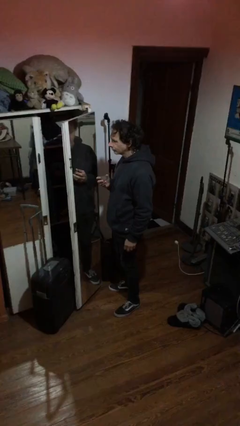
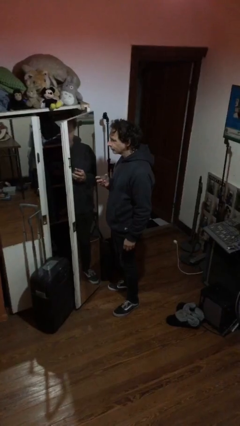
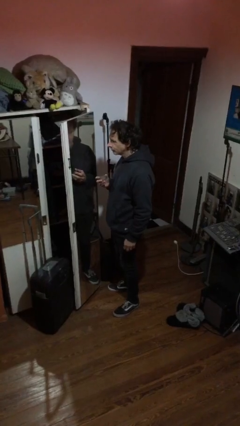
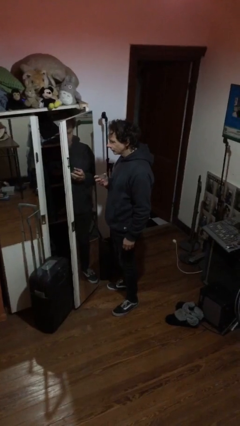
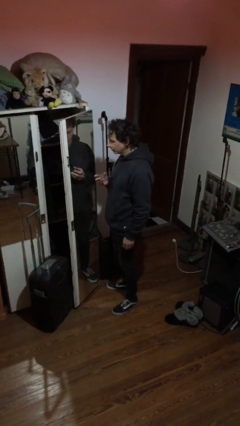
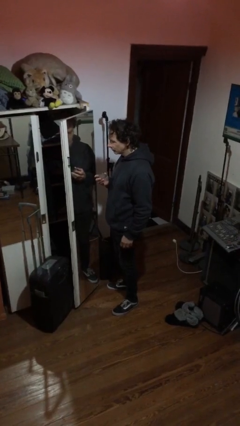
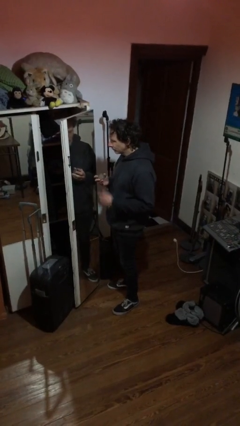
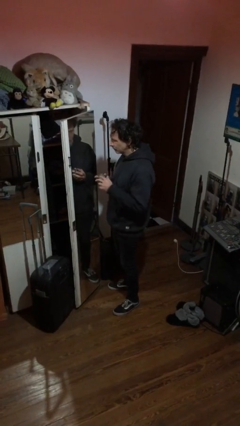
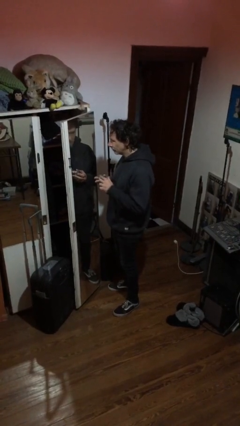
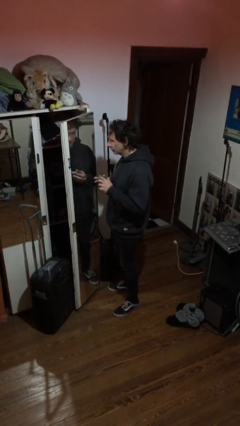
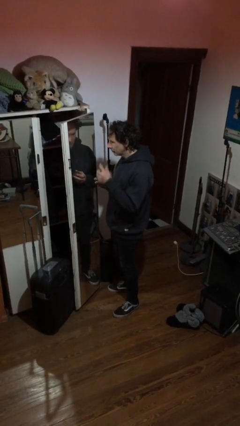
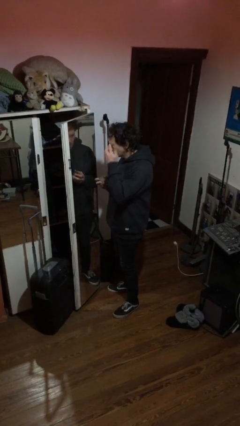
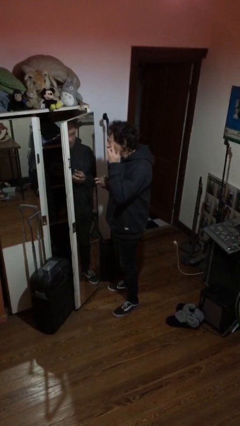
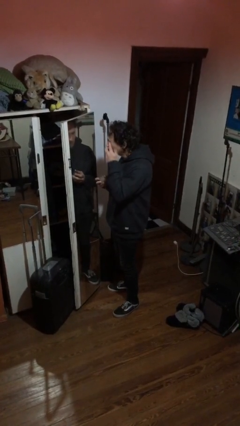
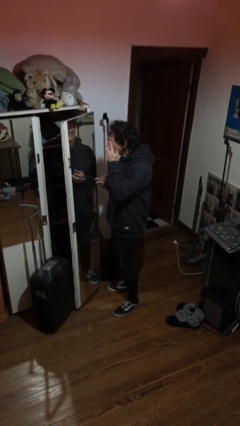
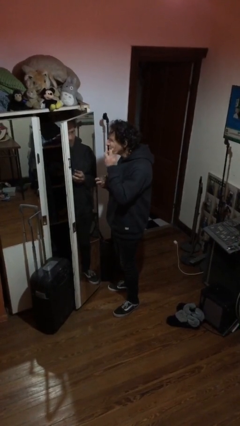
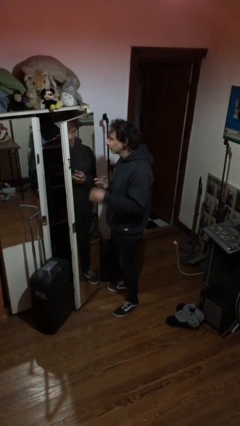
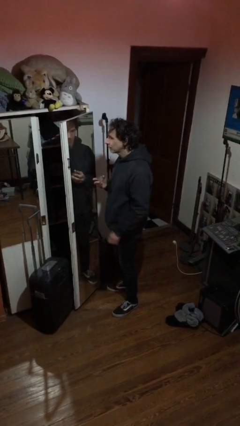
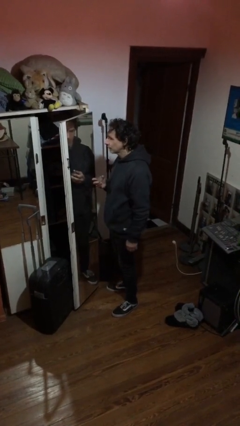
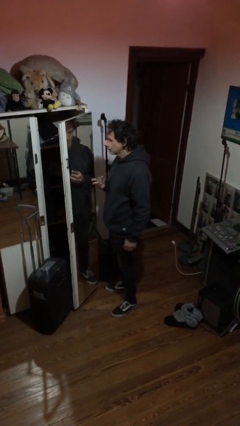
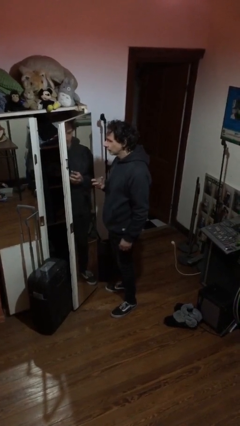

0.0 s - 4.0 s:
person applies eye makeup

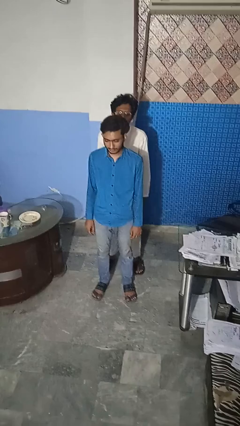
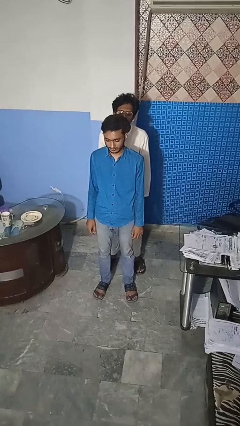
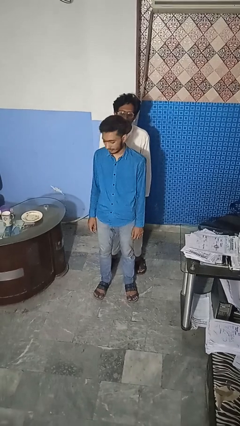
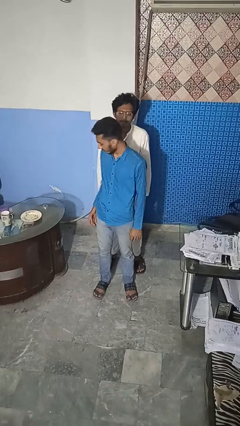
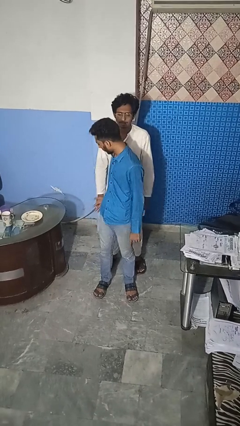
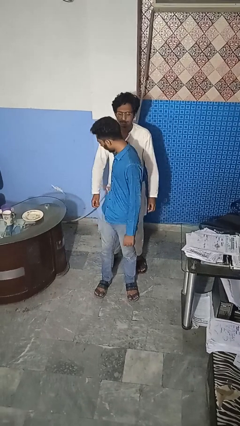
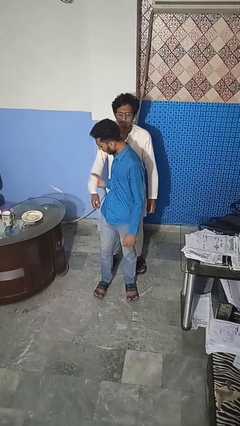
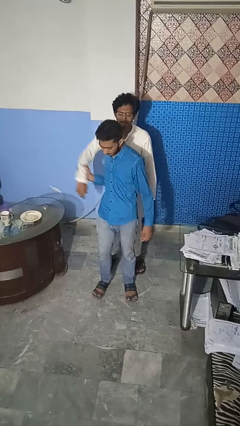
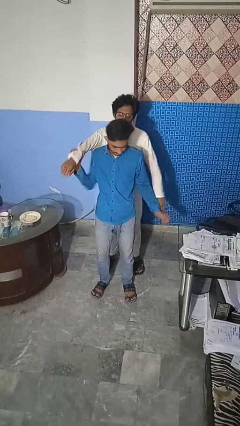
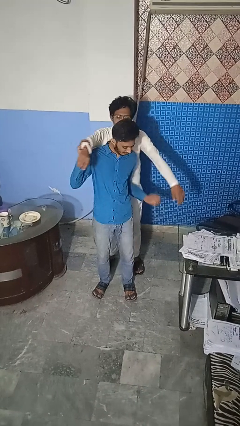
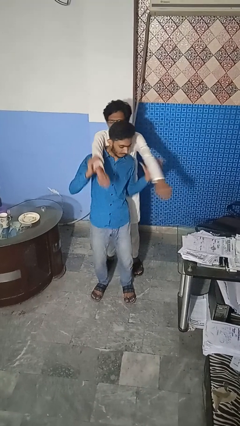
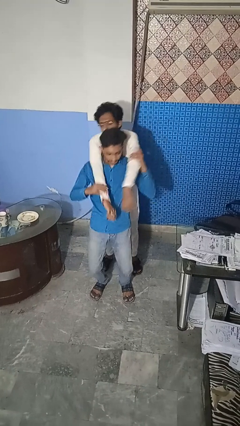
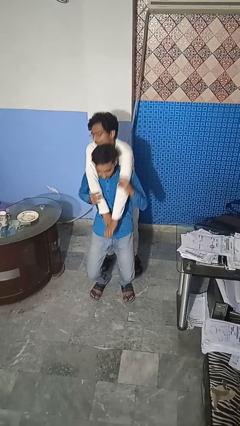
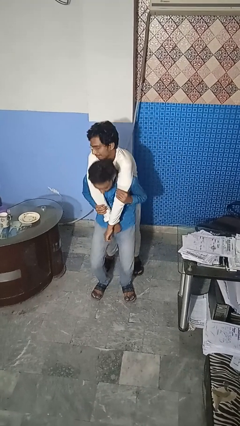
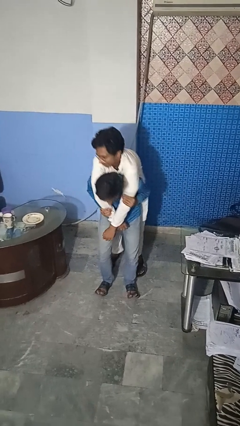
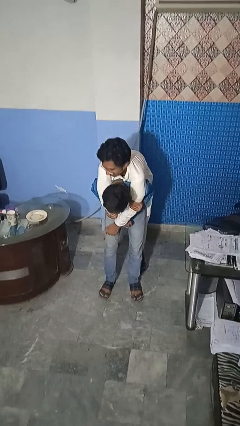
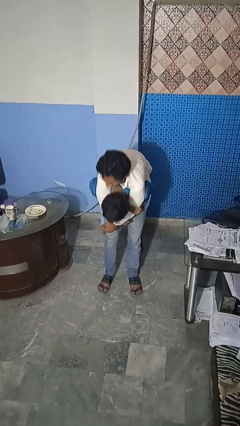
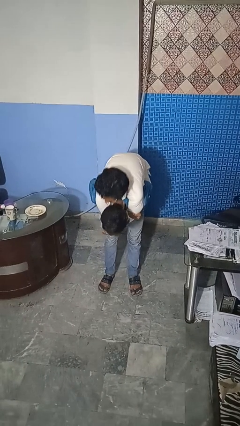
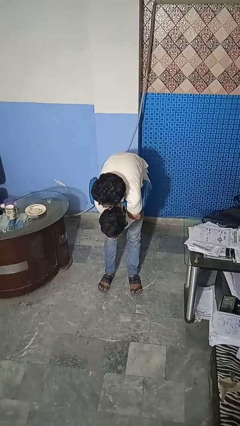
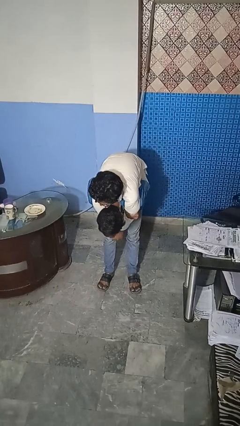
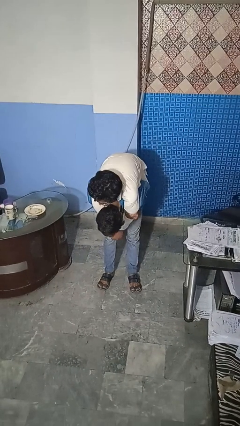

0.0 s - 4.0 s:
person carries person over shoulder

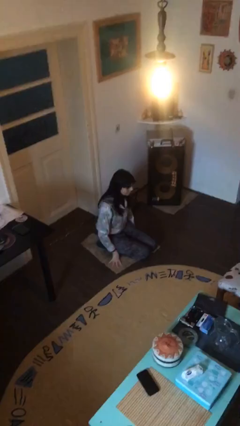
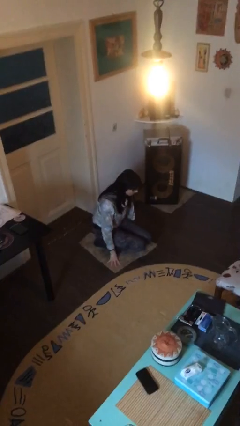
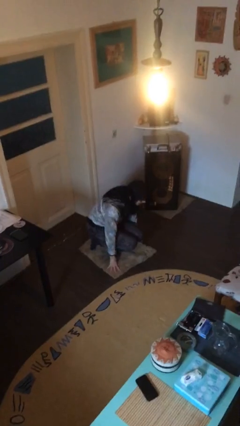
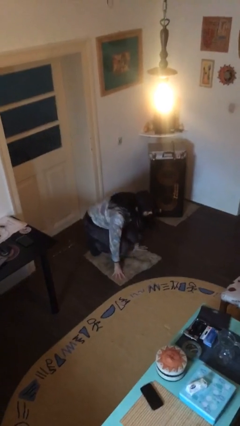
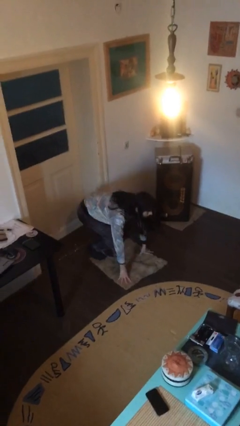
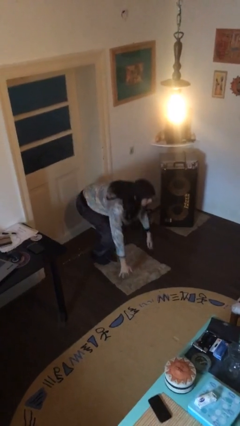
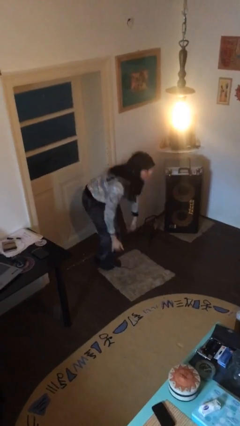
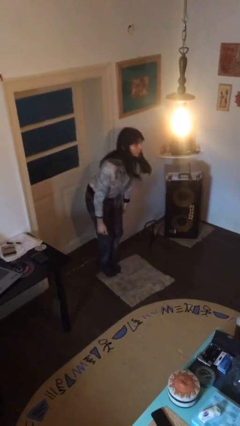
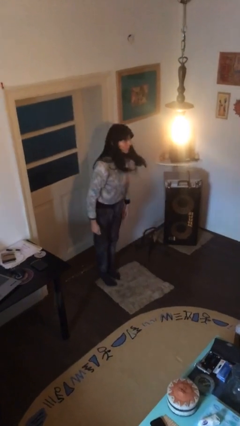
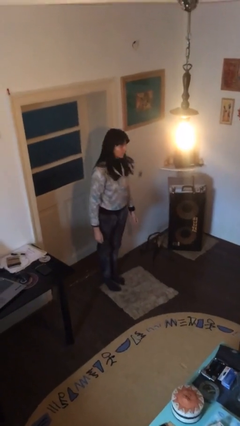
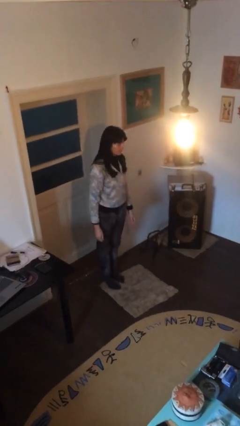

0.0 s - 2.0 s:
person stands up

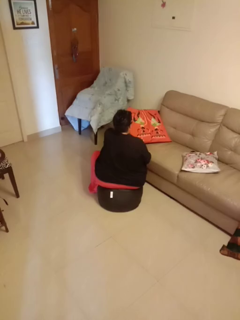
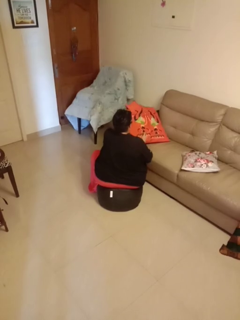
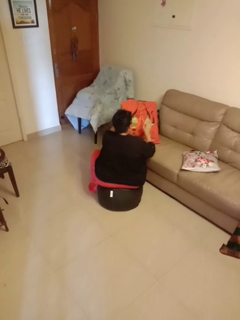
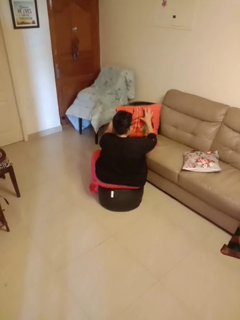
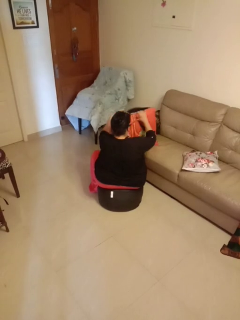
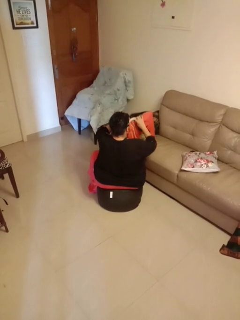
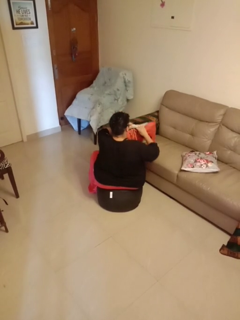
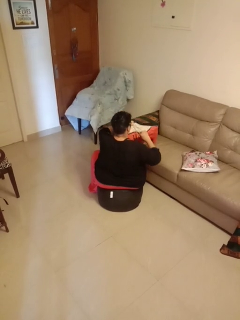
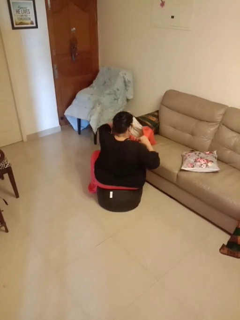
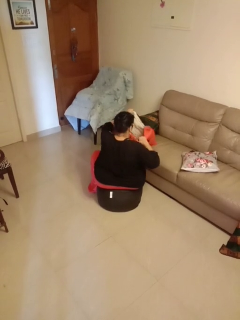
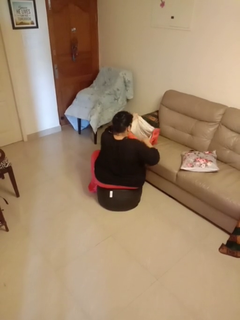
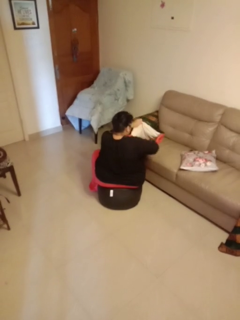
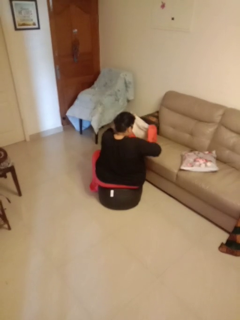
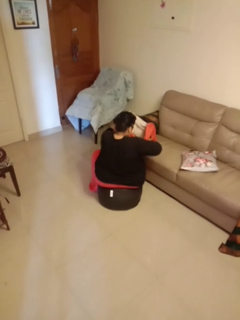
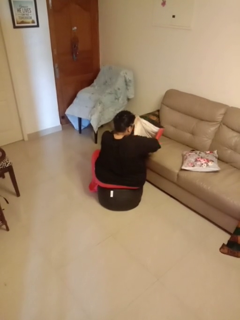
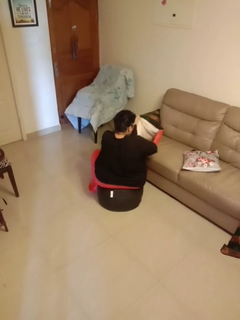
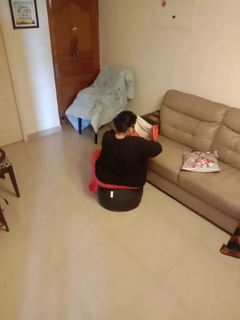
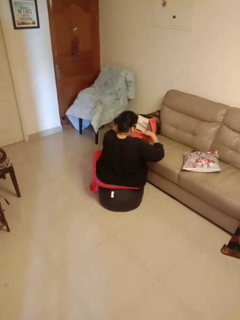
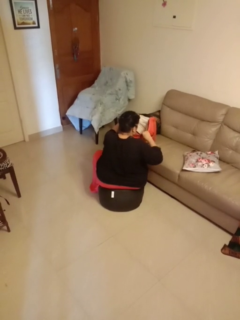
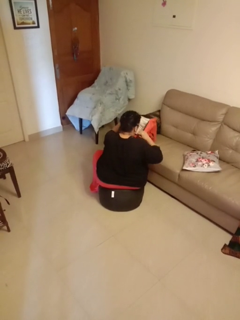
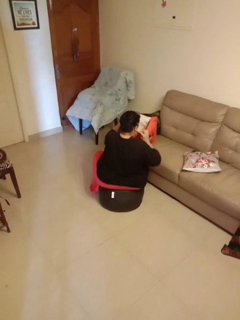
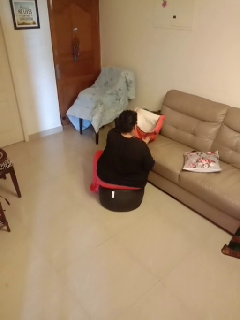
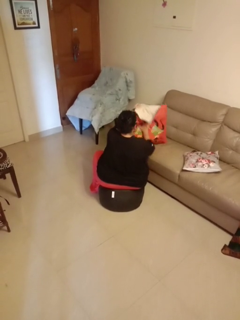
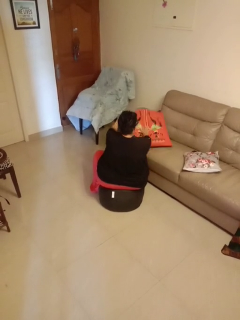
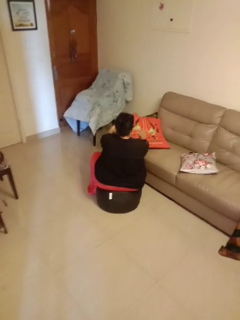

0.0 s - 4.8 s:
person searches in couch

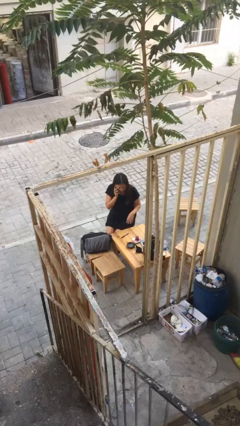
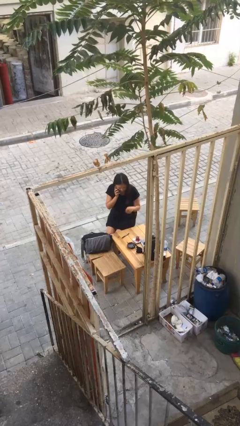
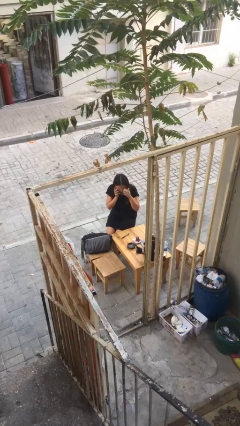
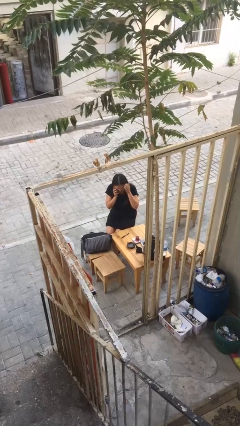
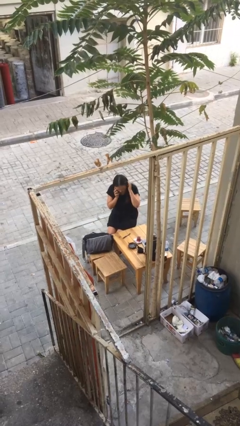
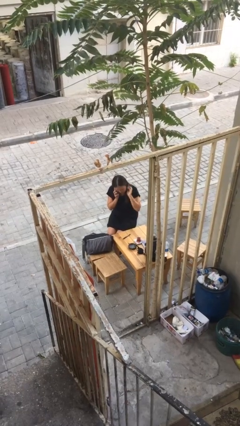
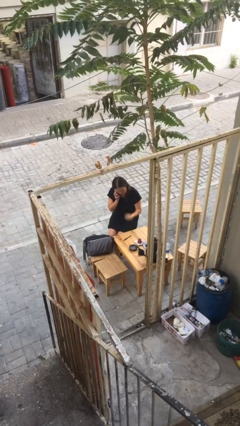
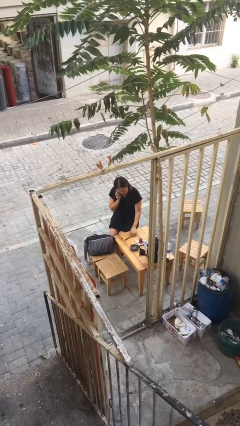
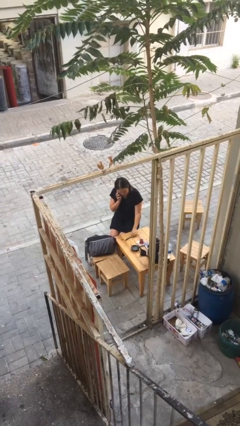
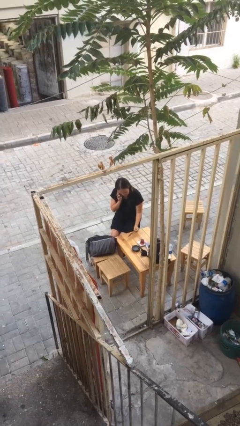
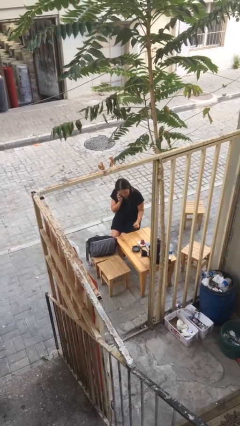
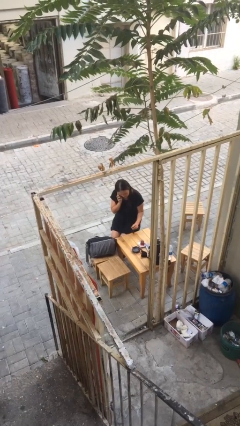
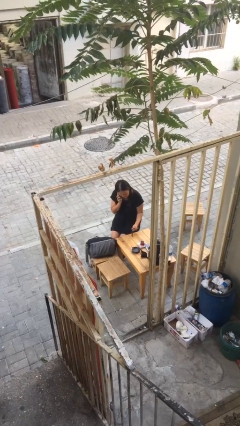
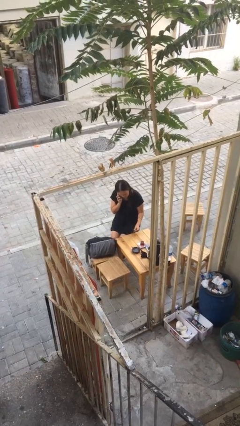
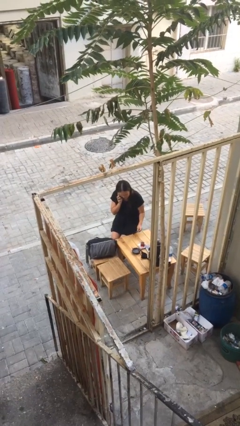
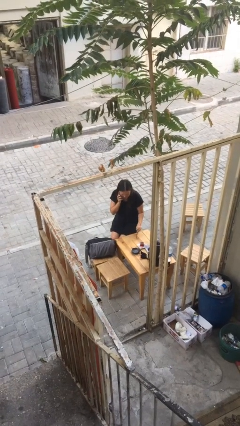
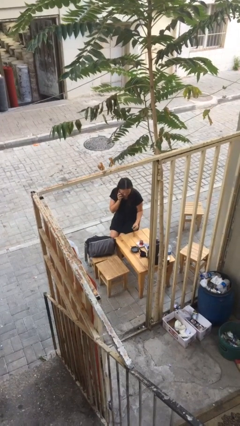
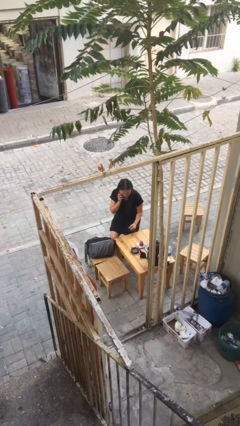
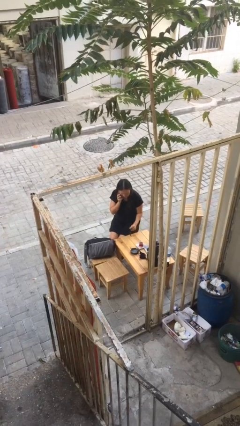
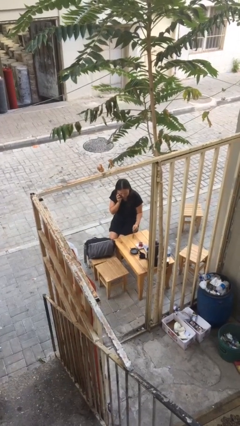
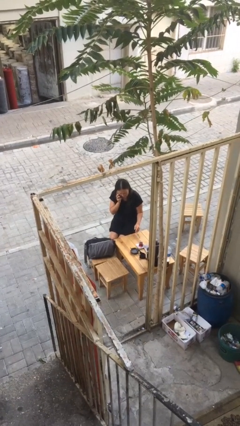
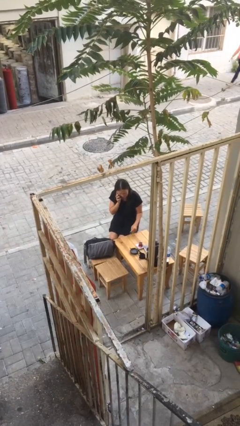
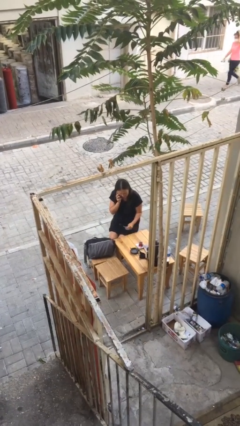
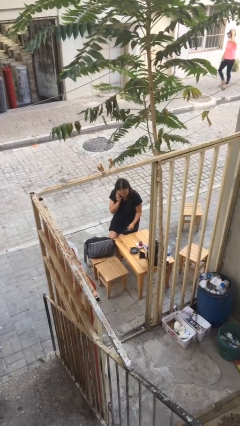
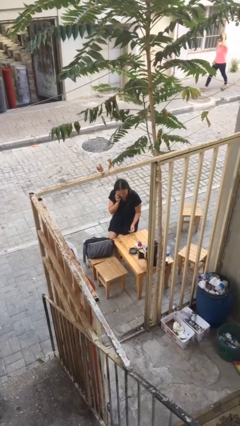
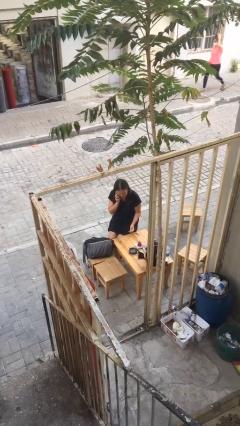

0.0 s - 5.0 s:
person talks on phone
